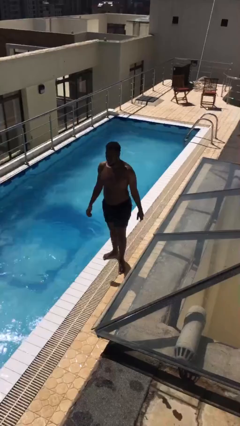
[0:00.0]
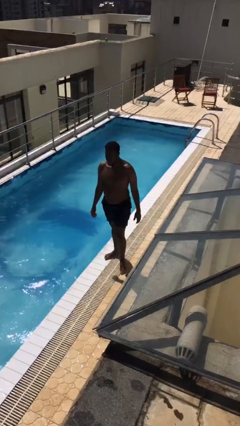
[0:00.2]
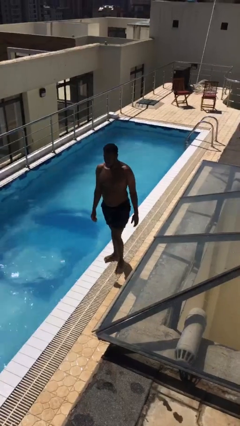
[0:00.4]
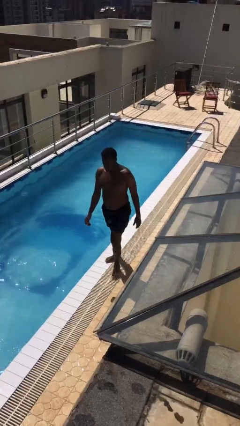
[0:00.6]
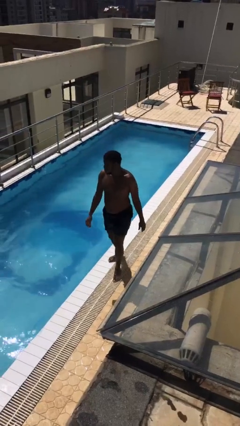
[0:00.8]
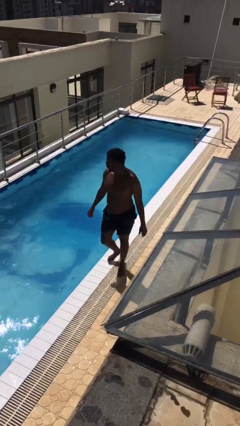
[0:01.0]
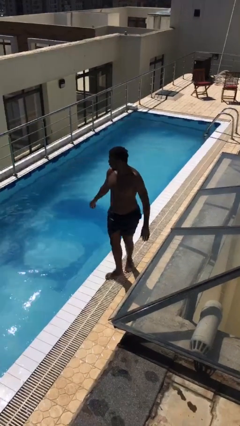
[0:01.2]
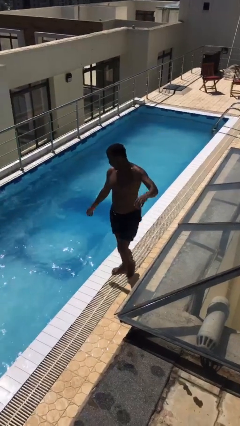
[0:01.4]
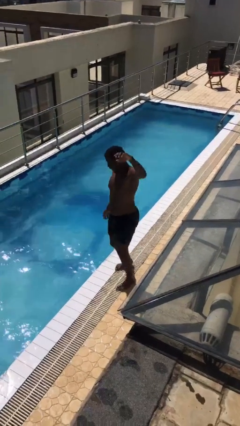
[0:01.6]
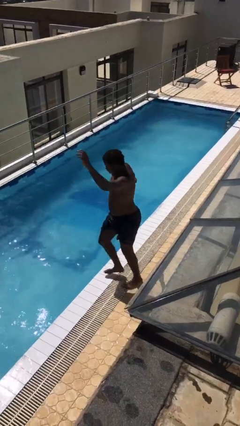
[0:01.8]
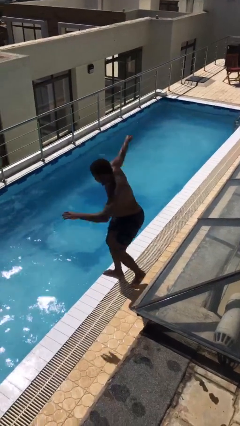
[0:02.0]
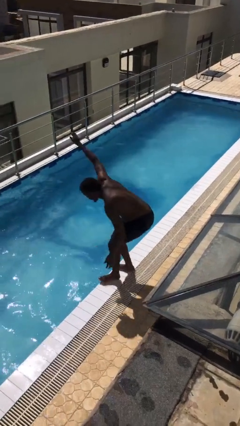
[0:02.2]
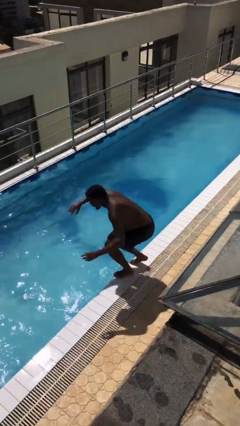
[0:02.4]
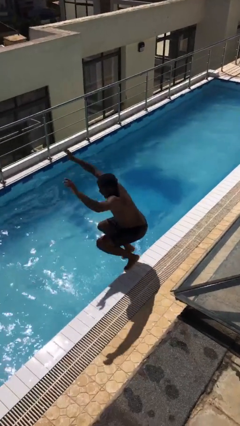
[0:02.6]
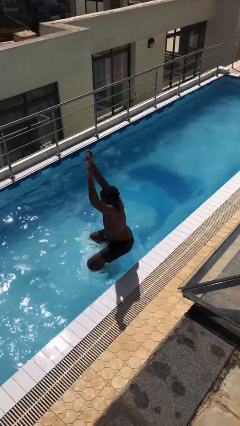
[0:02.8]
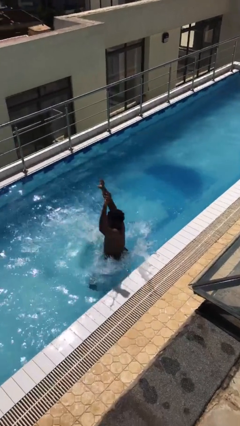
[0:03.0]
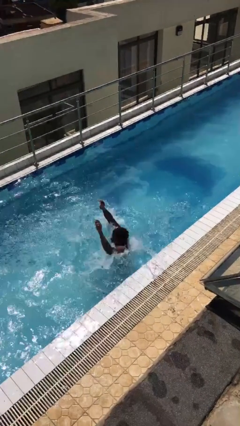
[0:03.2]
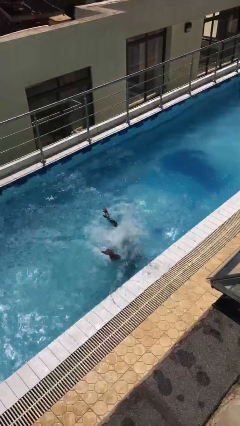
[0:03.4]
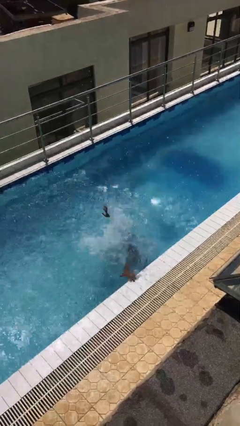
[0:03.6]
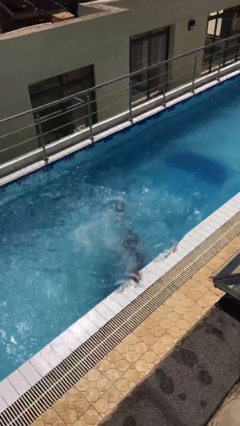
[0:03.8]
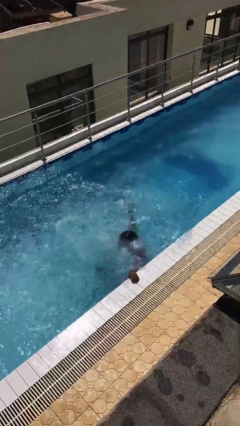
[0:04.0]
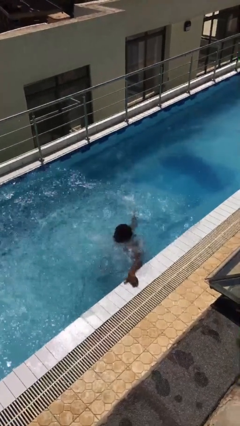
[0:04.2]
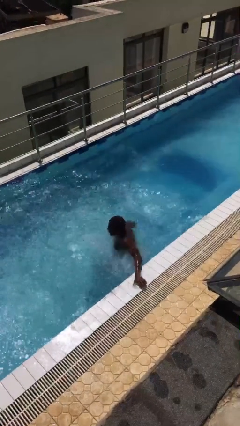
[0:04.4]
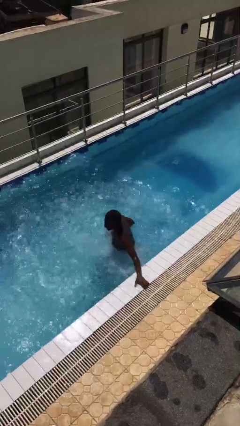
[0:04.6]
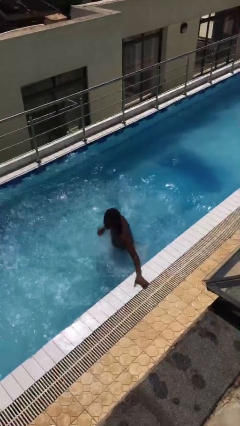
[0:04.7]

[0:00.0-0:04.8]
person falls into pool

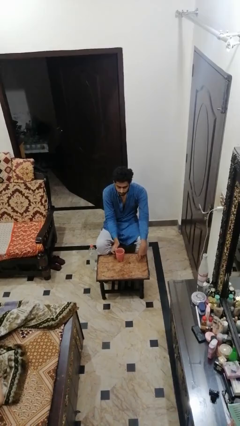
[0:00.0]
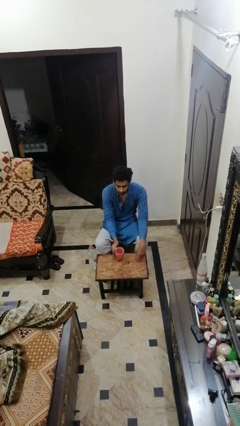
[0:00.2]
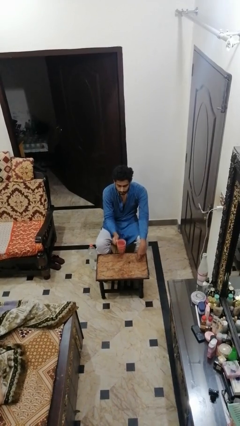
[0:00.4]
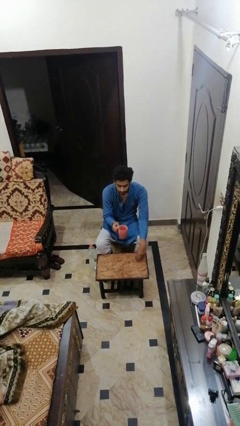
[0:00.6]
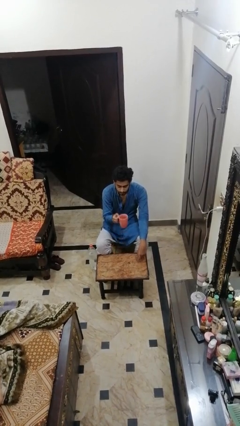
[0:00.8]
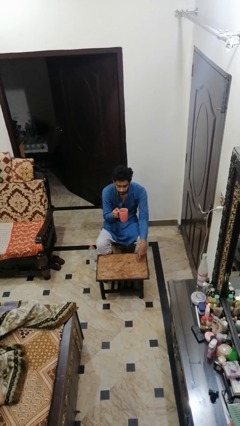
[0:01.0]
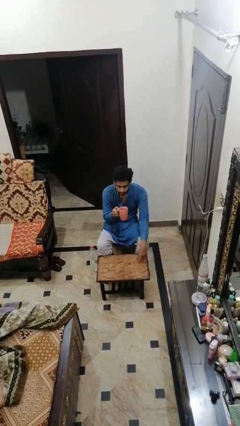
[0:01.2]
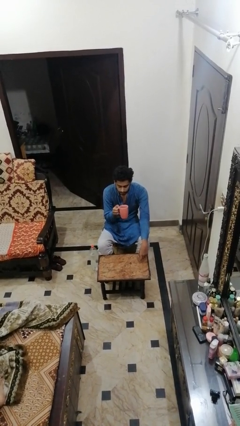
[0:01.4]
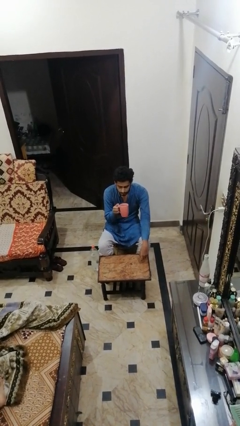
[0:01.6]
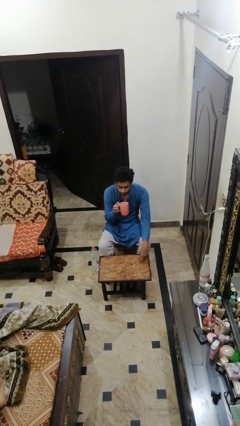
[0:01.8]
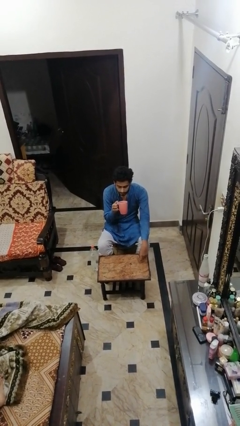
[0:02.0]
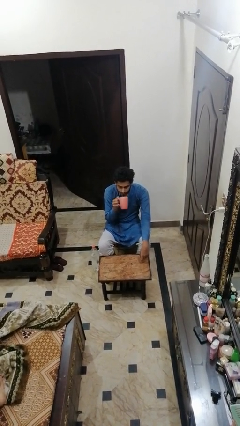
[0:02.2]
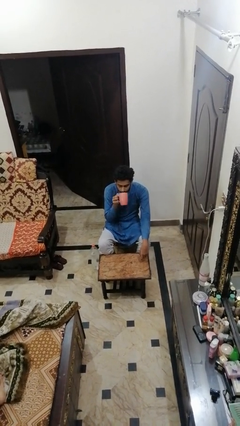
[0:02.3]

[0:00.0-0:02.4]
person picks up object from table

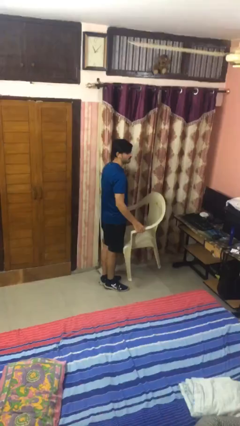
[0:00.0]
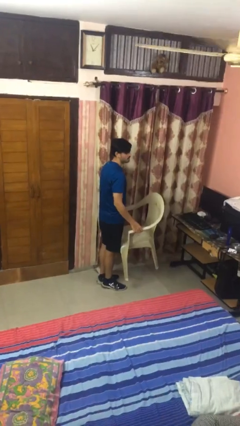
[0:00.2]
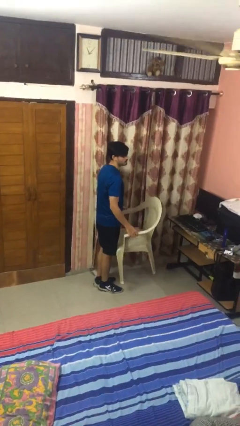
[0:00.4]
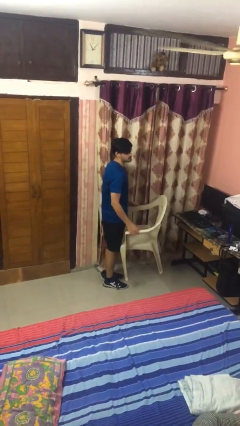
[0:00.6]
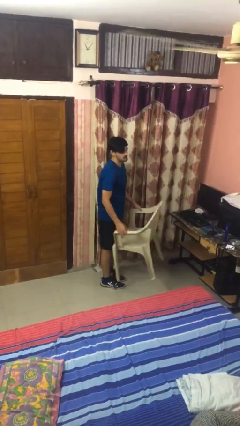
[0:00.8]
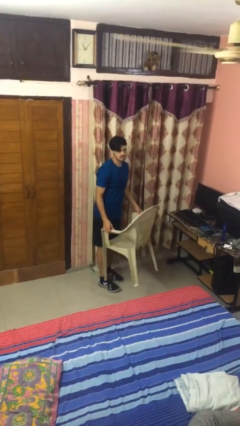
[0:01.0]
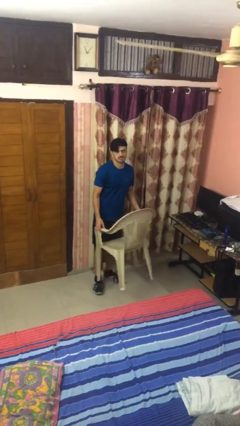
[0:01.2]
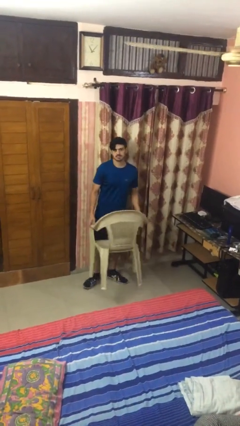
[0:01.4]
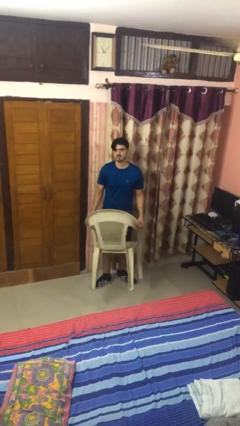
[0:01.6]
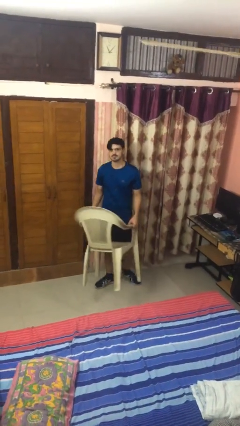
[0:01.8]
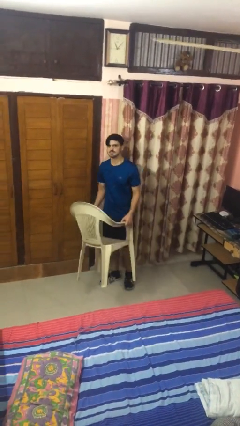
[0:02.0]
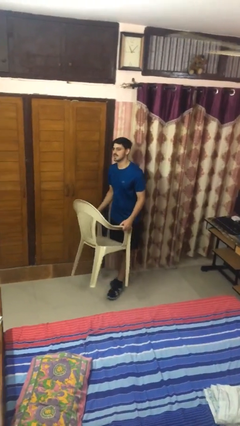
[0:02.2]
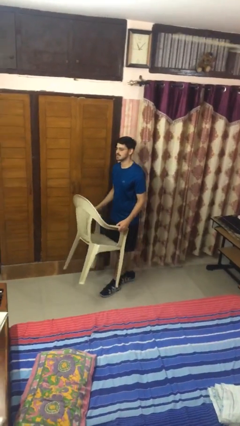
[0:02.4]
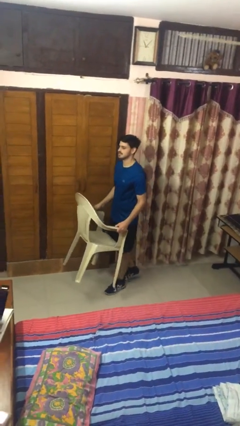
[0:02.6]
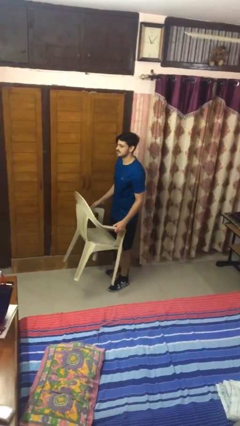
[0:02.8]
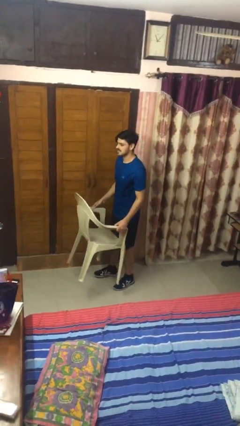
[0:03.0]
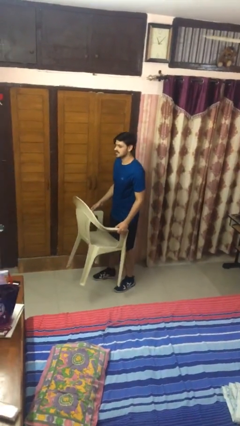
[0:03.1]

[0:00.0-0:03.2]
person carries furniture

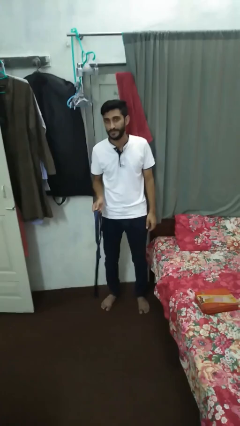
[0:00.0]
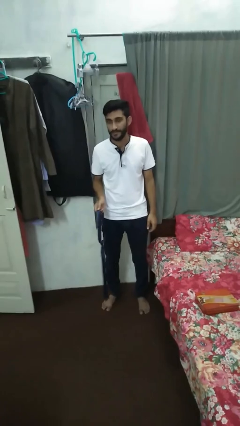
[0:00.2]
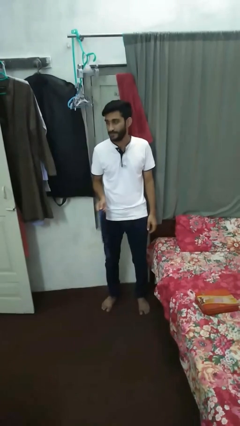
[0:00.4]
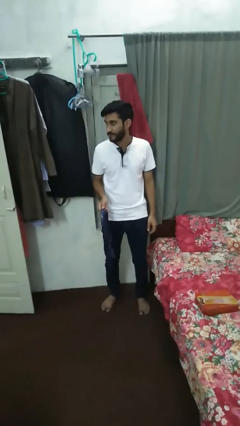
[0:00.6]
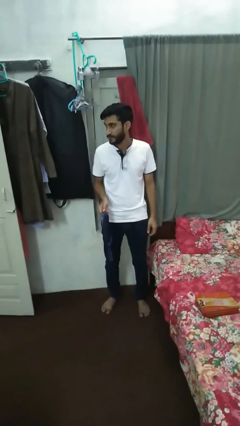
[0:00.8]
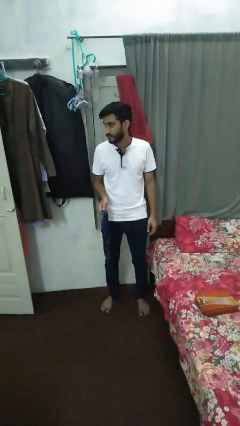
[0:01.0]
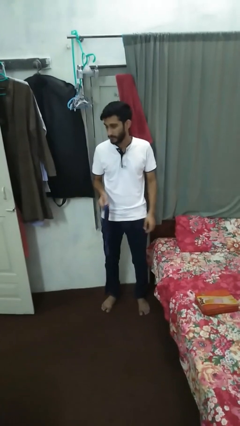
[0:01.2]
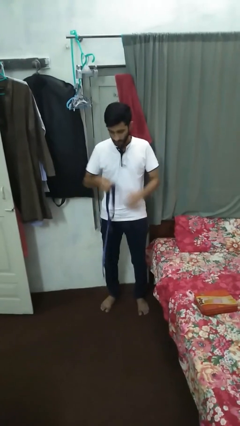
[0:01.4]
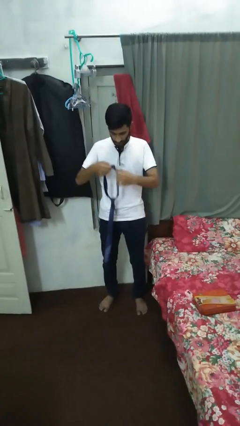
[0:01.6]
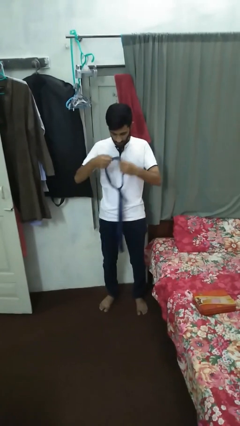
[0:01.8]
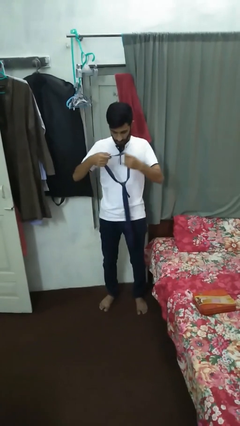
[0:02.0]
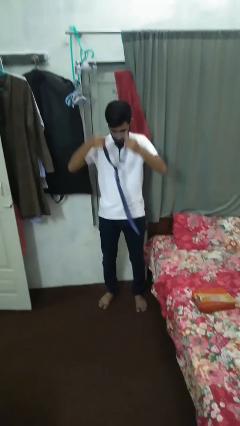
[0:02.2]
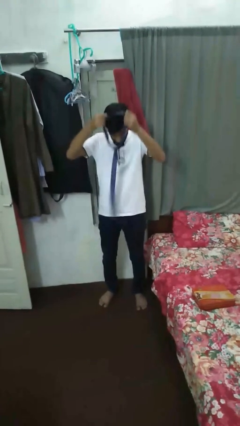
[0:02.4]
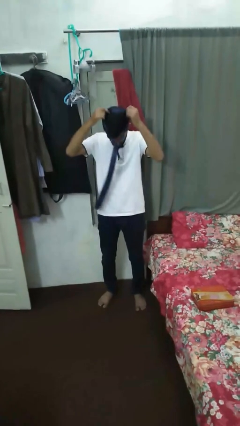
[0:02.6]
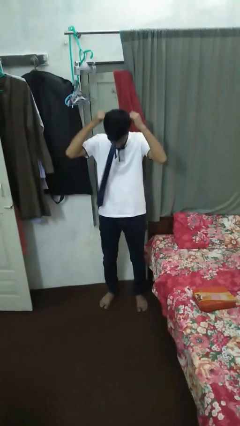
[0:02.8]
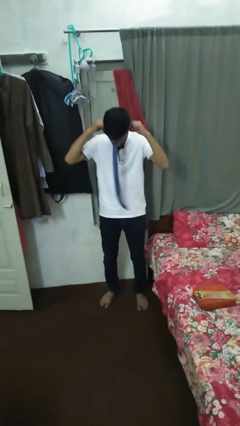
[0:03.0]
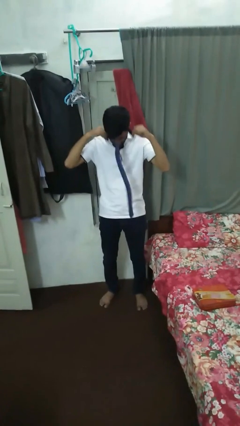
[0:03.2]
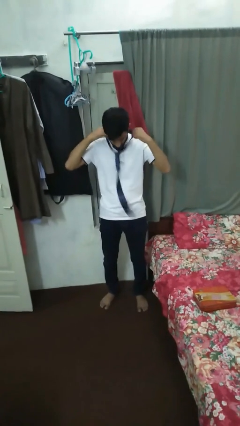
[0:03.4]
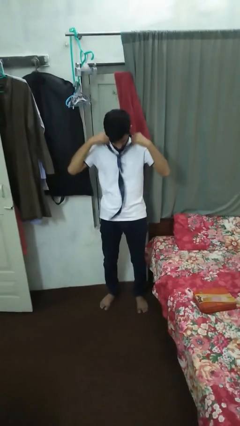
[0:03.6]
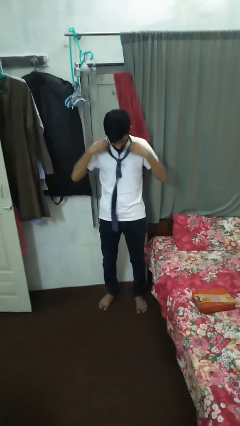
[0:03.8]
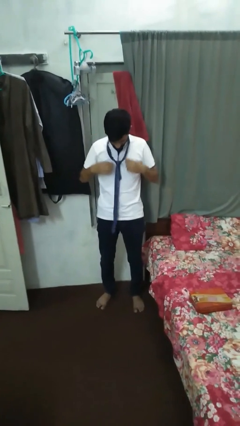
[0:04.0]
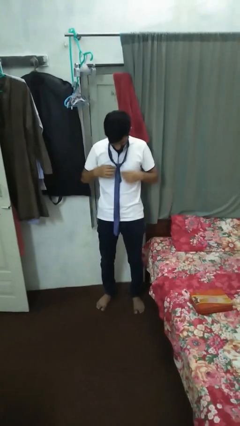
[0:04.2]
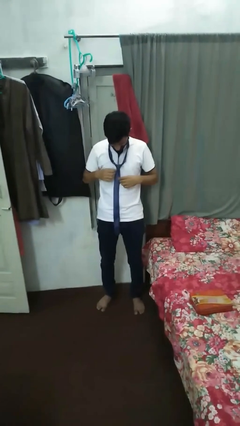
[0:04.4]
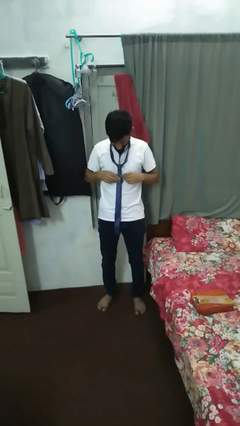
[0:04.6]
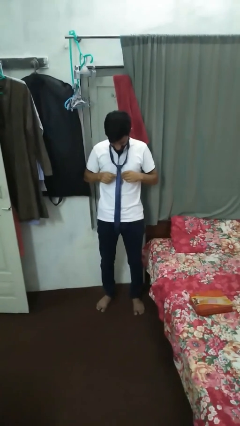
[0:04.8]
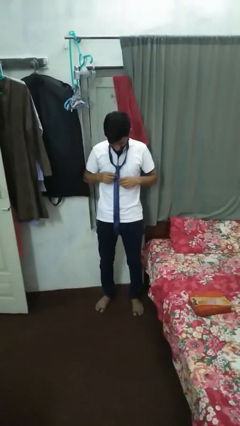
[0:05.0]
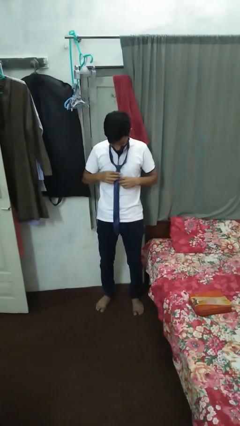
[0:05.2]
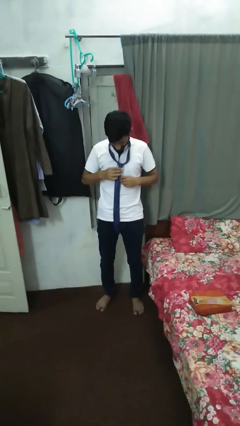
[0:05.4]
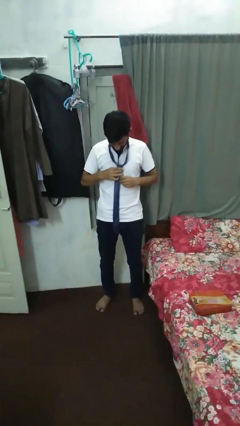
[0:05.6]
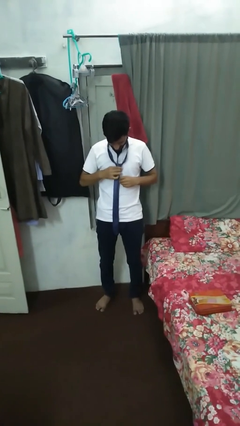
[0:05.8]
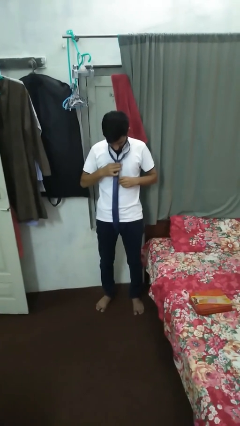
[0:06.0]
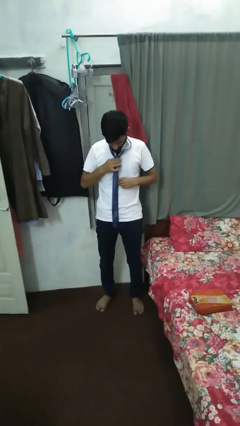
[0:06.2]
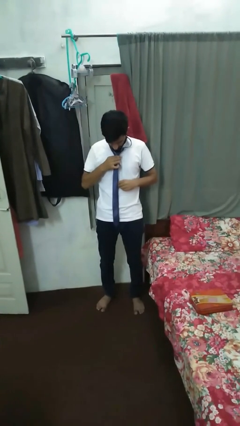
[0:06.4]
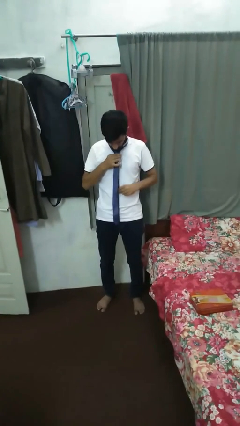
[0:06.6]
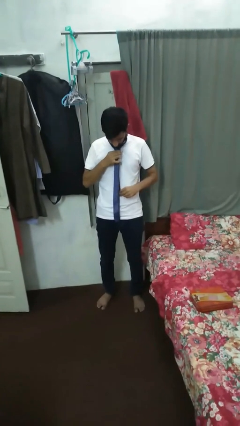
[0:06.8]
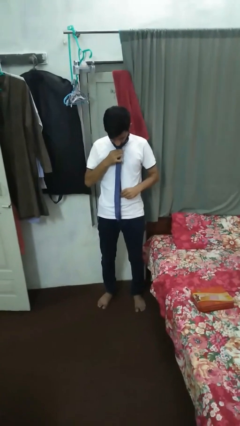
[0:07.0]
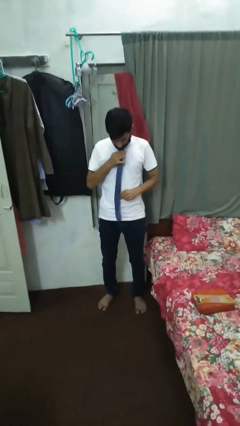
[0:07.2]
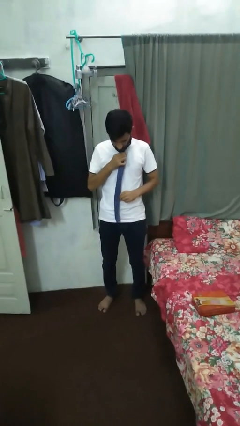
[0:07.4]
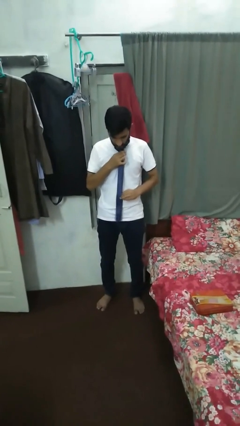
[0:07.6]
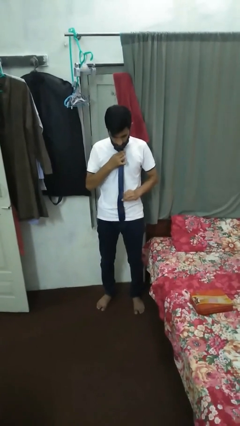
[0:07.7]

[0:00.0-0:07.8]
person puts on necktie
